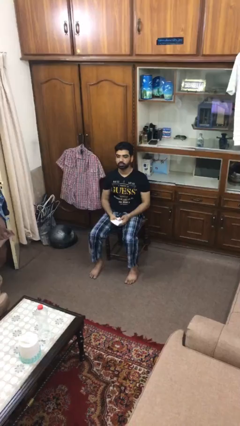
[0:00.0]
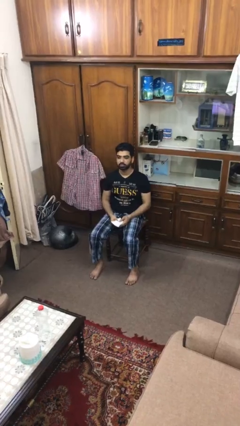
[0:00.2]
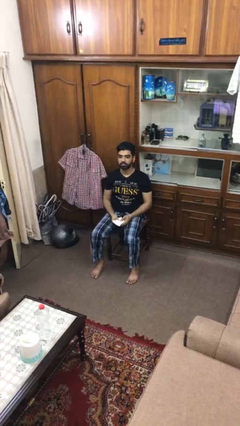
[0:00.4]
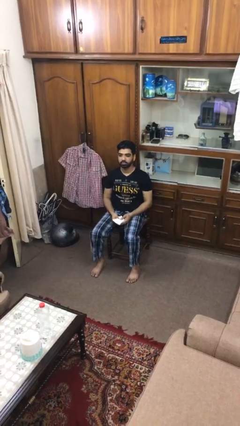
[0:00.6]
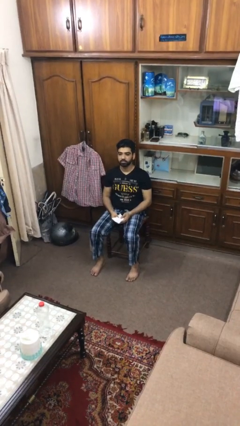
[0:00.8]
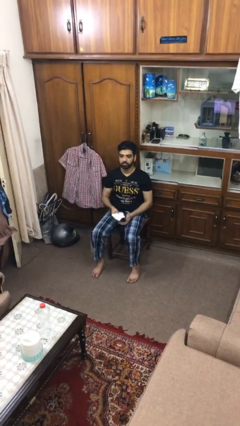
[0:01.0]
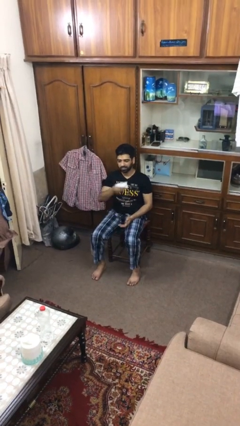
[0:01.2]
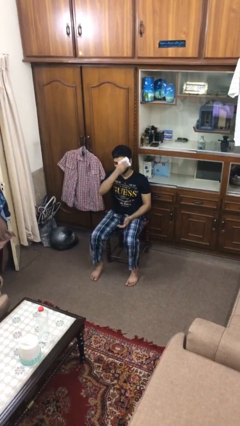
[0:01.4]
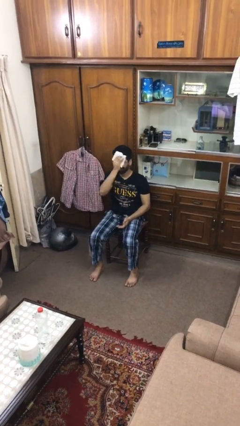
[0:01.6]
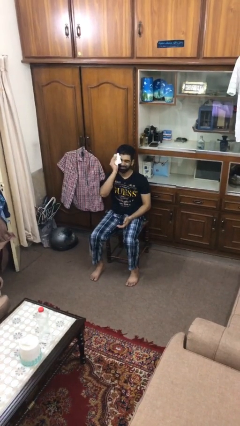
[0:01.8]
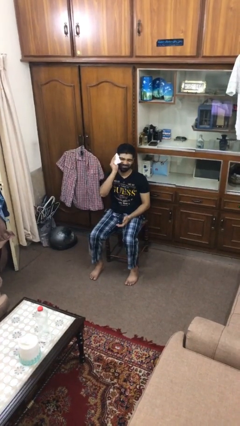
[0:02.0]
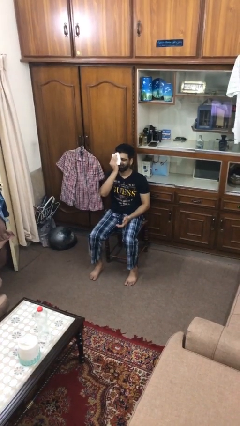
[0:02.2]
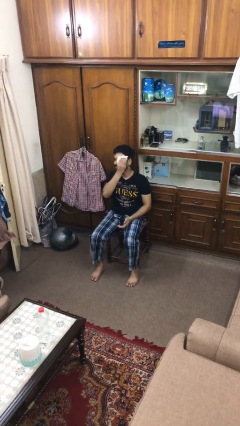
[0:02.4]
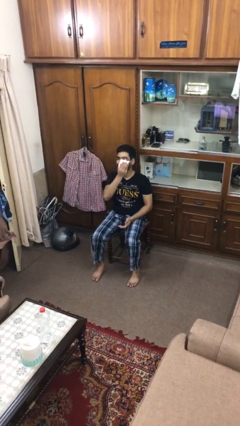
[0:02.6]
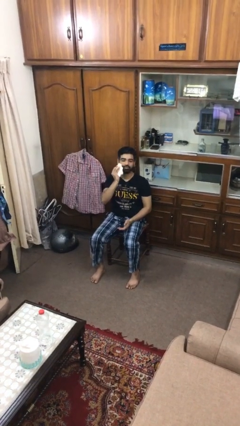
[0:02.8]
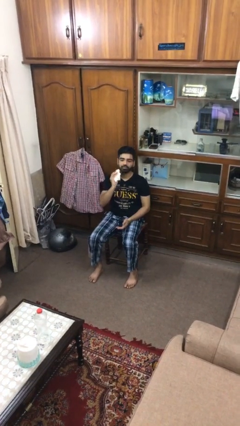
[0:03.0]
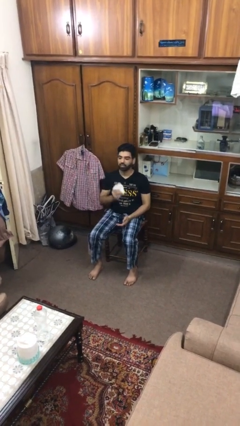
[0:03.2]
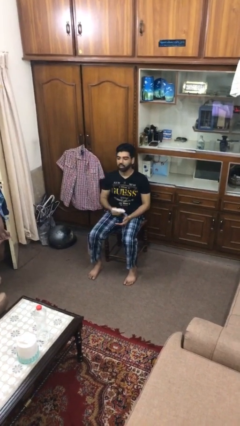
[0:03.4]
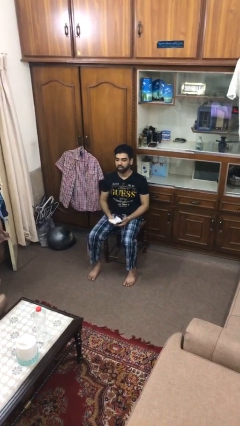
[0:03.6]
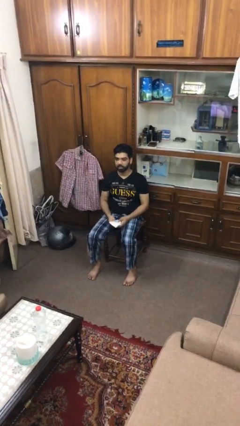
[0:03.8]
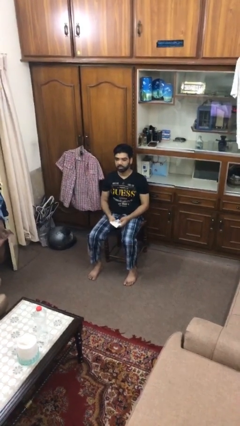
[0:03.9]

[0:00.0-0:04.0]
person wipes mouth with napkin

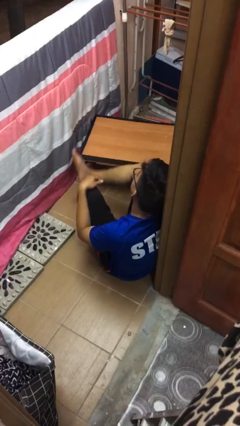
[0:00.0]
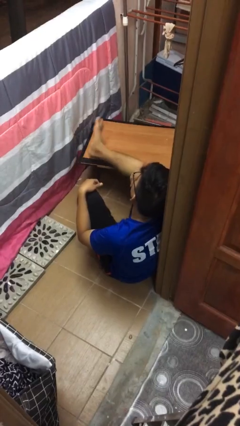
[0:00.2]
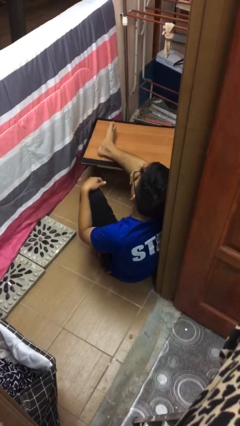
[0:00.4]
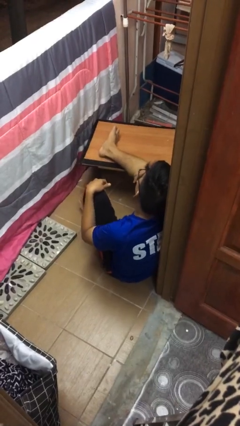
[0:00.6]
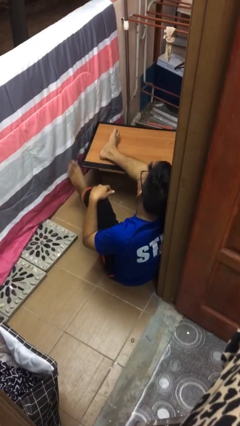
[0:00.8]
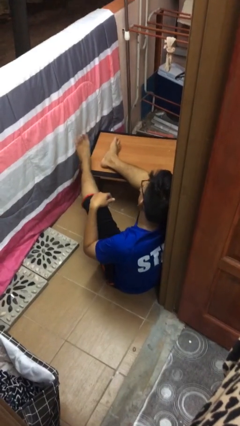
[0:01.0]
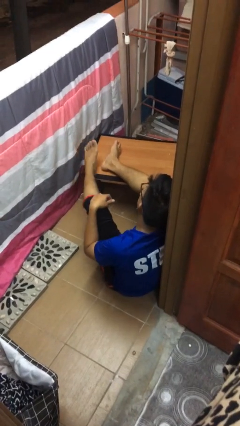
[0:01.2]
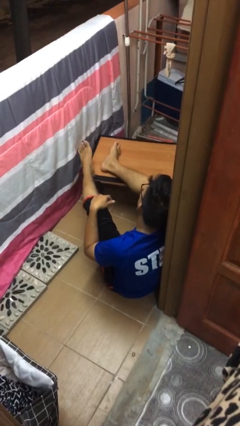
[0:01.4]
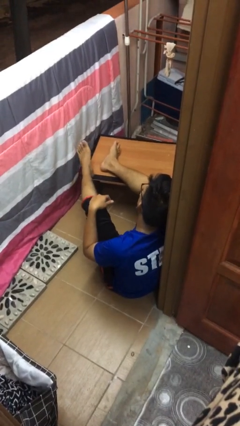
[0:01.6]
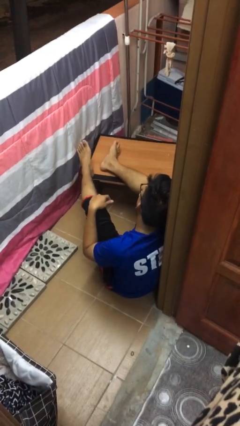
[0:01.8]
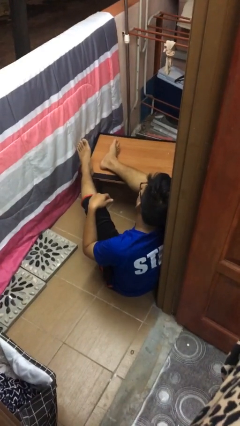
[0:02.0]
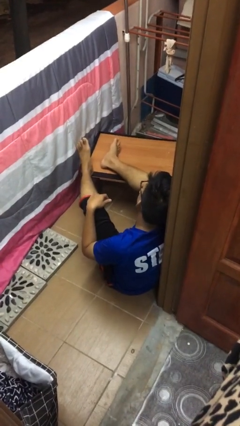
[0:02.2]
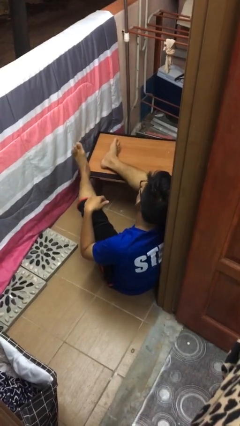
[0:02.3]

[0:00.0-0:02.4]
person puts feet up

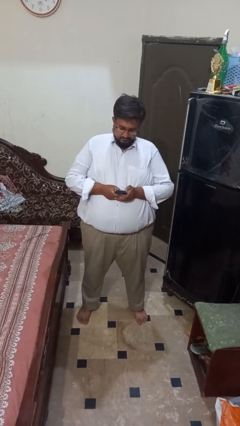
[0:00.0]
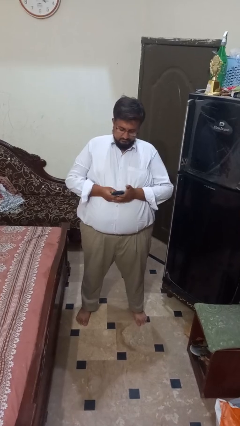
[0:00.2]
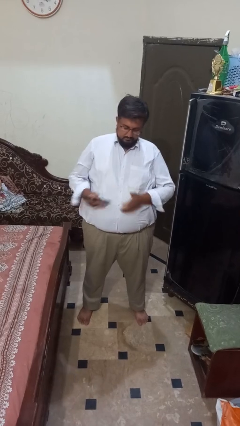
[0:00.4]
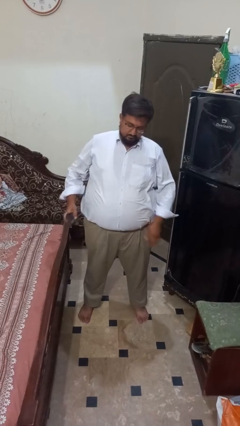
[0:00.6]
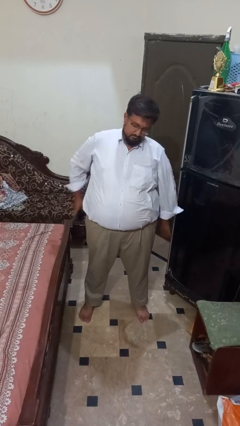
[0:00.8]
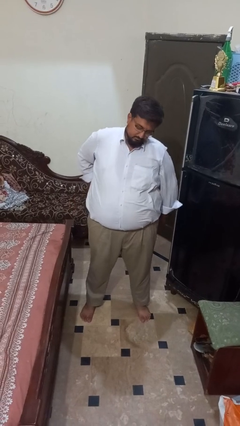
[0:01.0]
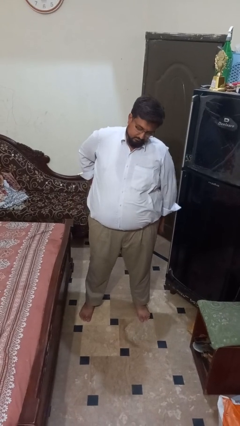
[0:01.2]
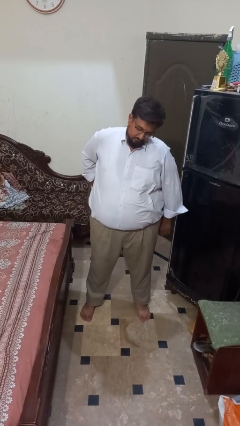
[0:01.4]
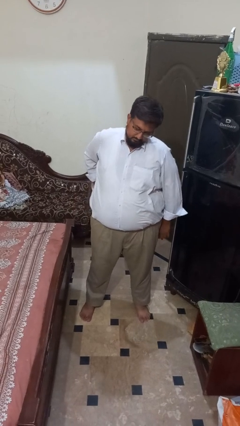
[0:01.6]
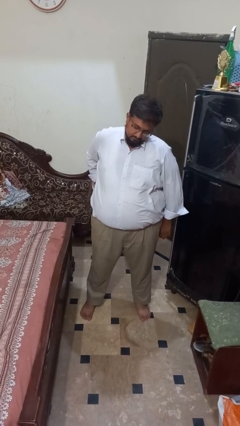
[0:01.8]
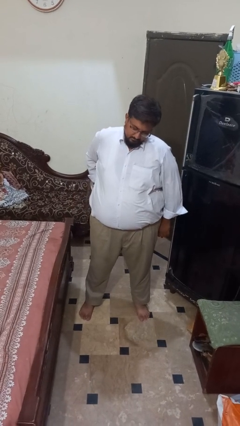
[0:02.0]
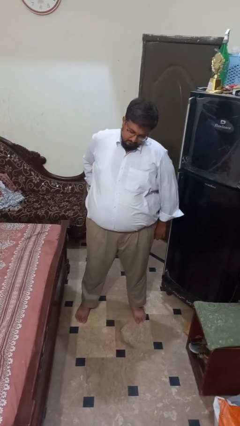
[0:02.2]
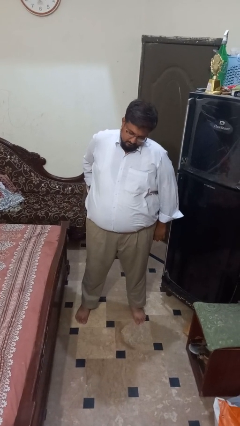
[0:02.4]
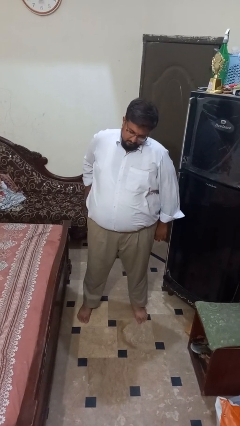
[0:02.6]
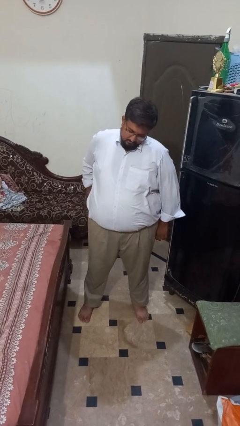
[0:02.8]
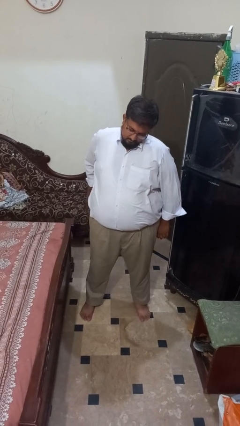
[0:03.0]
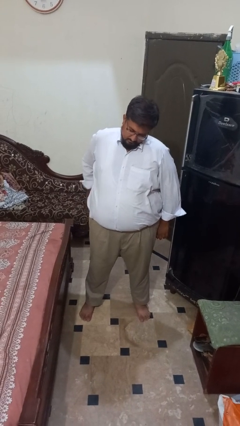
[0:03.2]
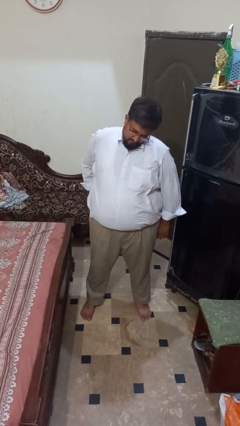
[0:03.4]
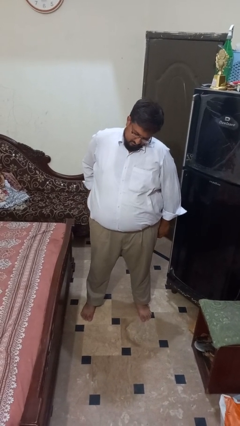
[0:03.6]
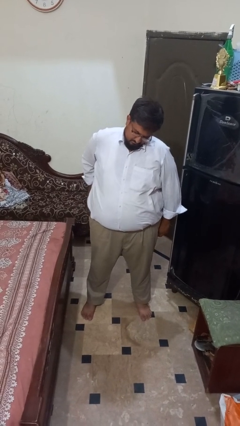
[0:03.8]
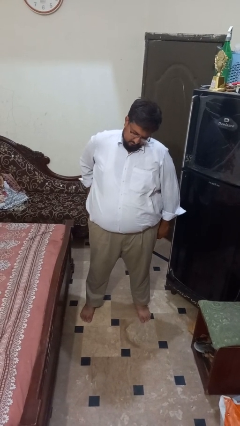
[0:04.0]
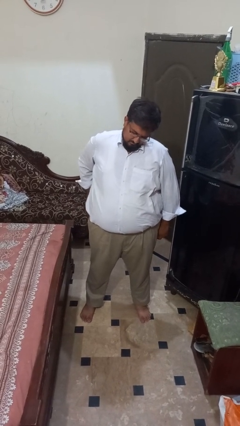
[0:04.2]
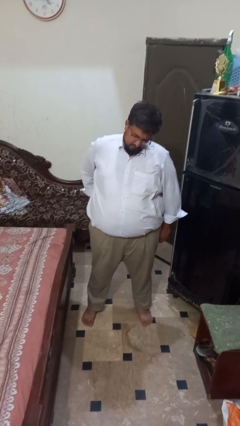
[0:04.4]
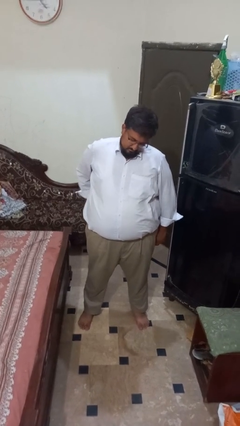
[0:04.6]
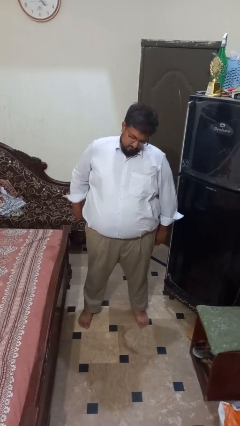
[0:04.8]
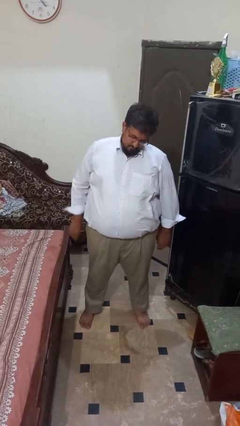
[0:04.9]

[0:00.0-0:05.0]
person puts phone into pocket

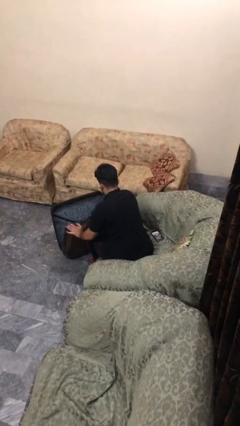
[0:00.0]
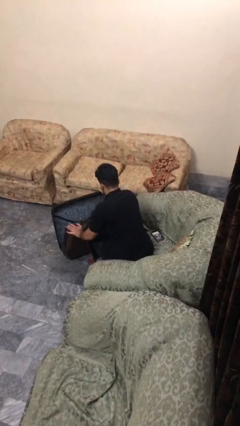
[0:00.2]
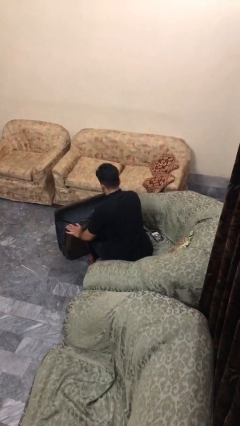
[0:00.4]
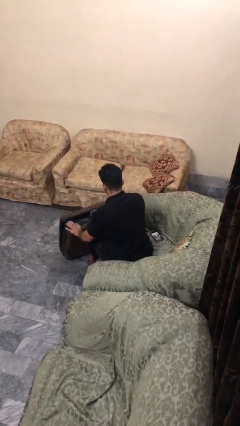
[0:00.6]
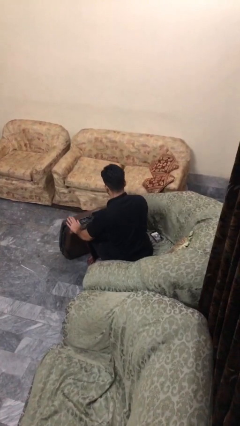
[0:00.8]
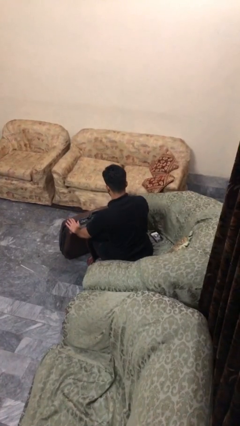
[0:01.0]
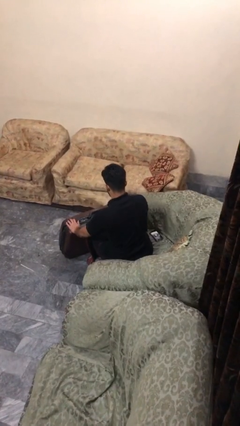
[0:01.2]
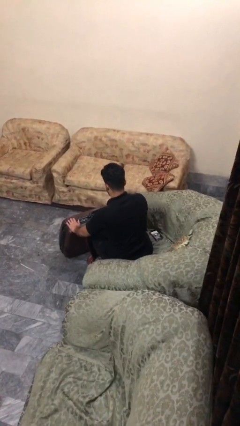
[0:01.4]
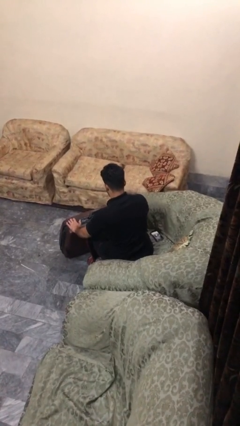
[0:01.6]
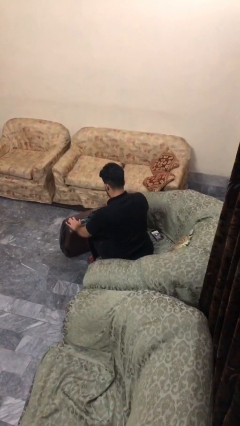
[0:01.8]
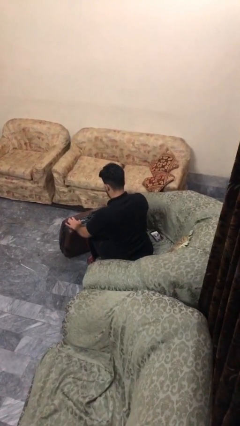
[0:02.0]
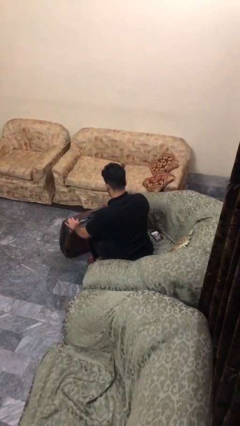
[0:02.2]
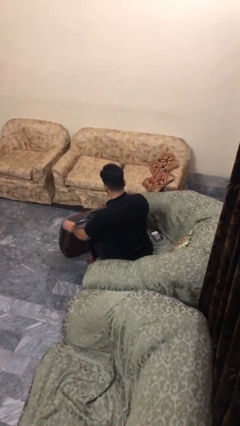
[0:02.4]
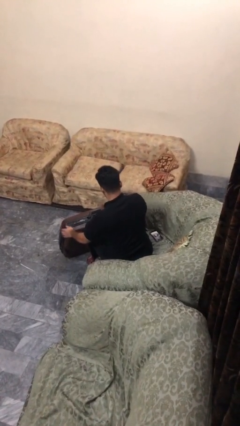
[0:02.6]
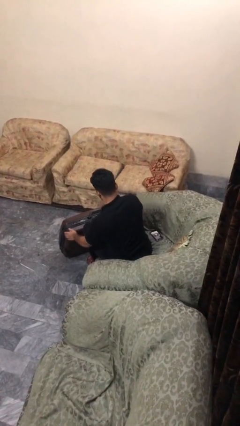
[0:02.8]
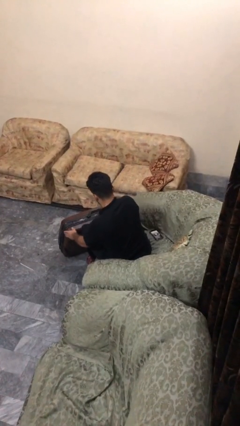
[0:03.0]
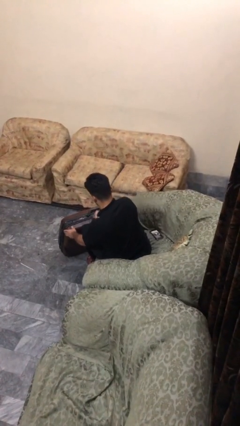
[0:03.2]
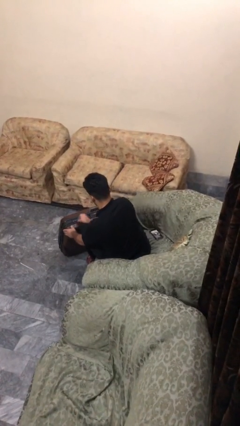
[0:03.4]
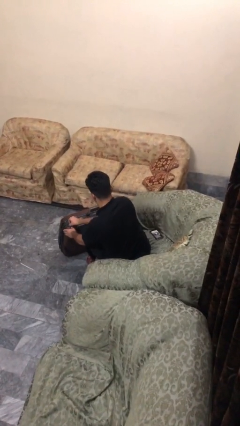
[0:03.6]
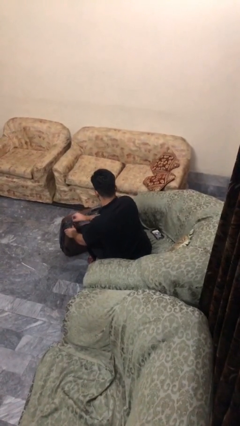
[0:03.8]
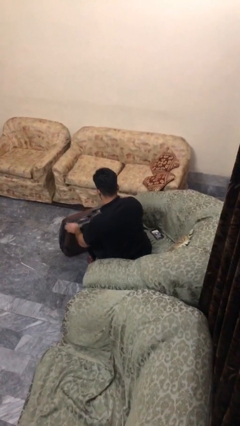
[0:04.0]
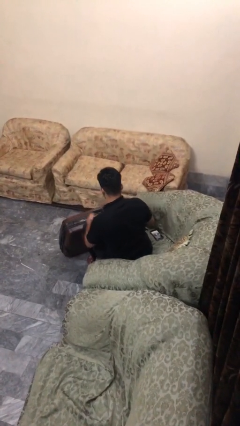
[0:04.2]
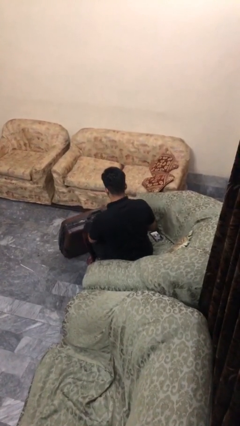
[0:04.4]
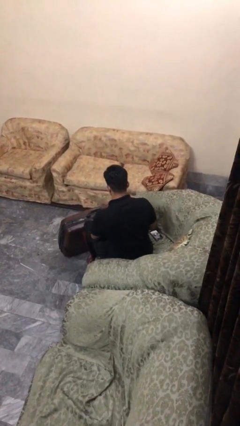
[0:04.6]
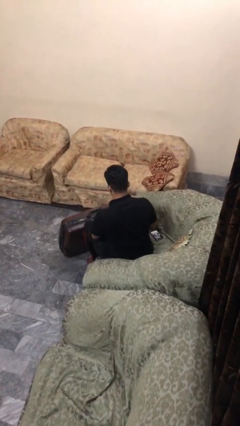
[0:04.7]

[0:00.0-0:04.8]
person closes suitcase

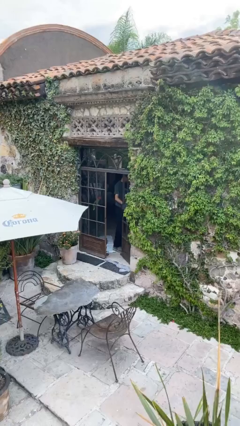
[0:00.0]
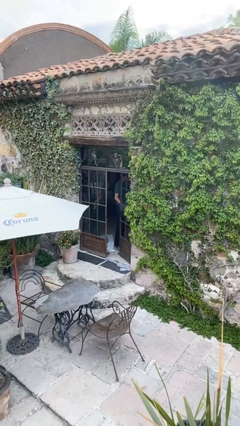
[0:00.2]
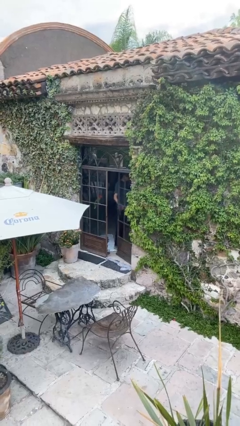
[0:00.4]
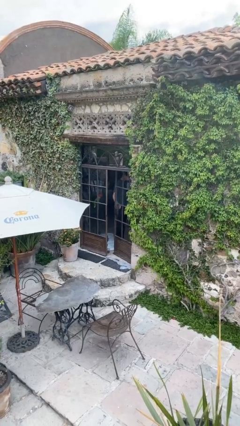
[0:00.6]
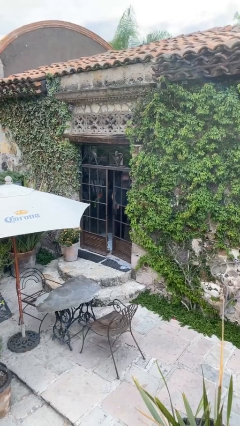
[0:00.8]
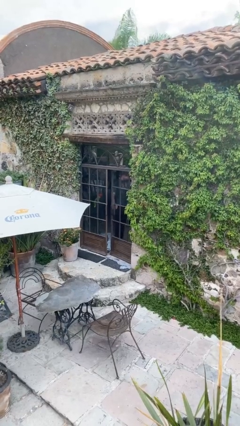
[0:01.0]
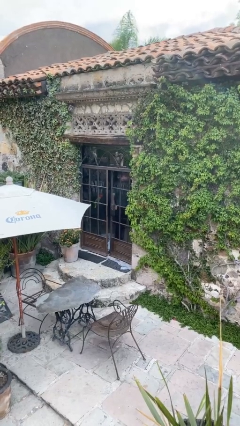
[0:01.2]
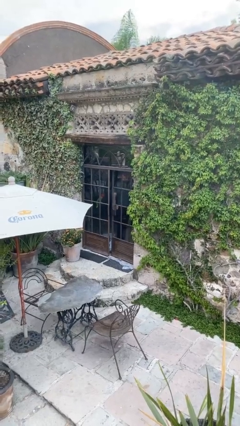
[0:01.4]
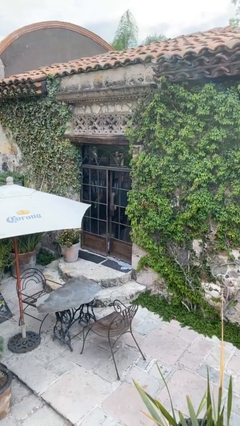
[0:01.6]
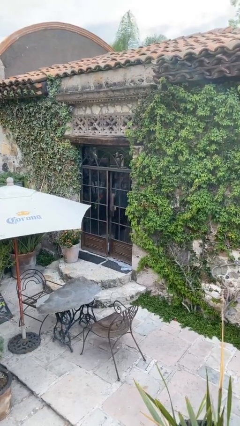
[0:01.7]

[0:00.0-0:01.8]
person closes facility door
